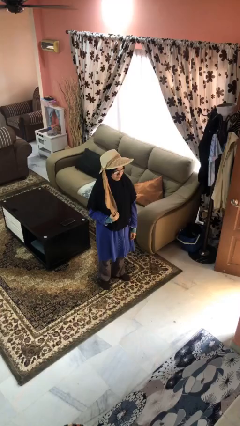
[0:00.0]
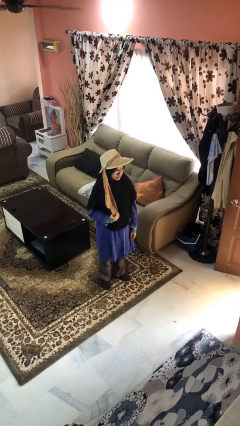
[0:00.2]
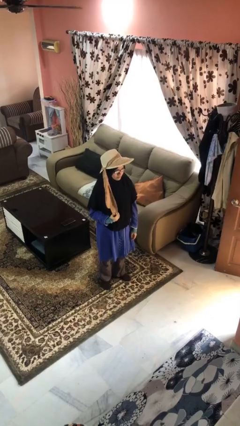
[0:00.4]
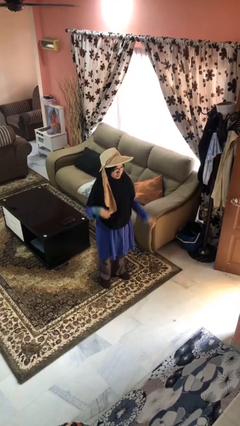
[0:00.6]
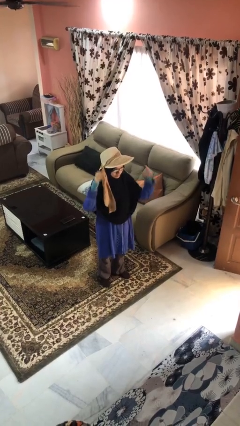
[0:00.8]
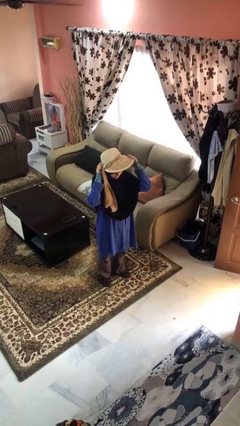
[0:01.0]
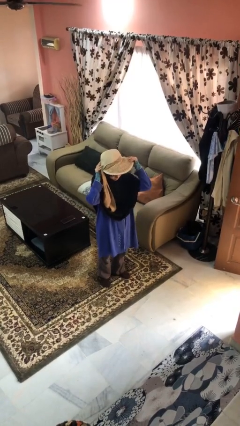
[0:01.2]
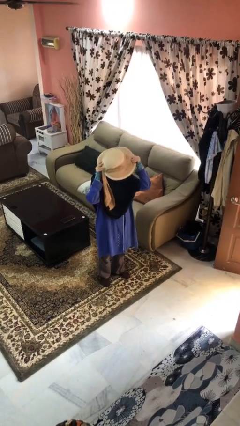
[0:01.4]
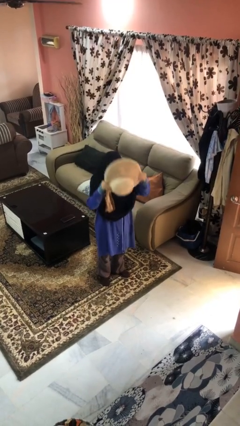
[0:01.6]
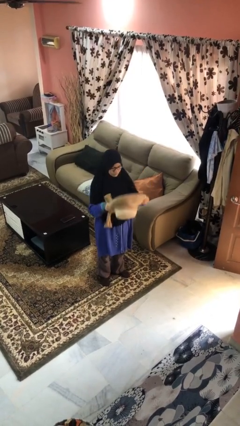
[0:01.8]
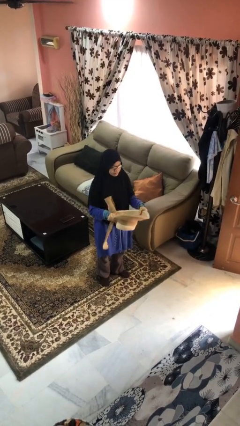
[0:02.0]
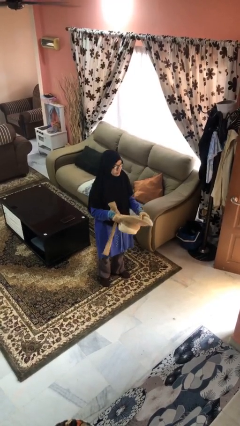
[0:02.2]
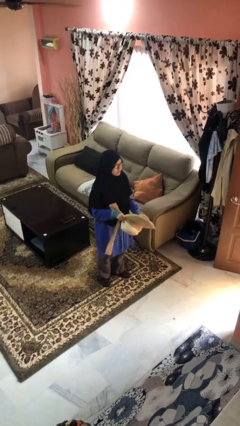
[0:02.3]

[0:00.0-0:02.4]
person takes off hat

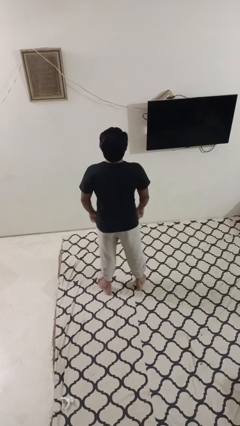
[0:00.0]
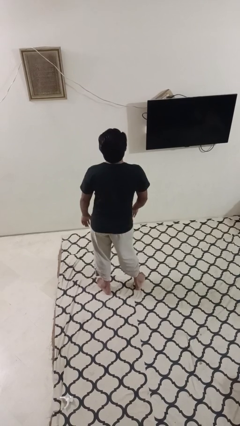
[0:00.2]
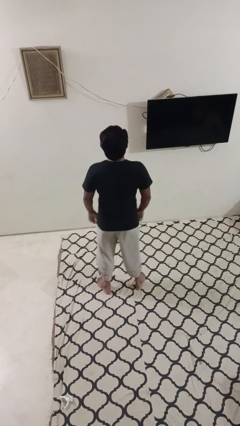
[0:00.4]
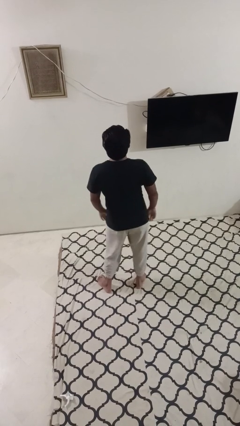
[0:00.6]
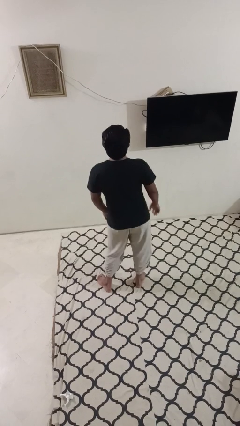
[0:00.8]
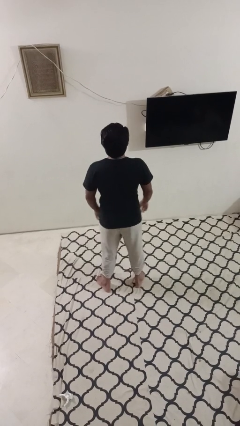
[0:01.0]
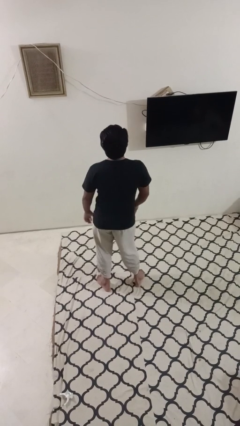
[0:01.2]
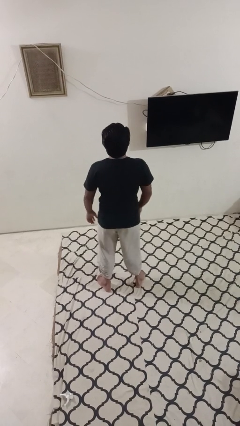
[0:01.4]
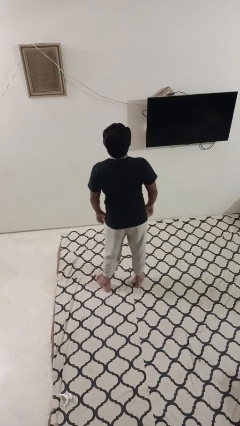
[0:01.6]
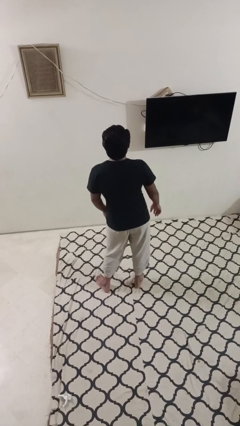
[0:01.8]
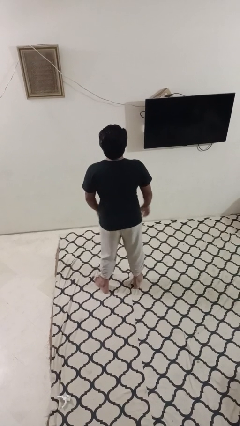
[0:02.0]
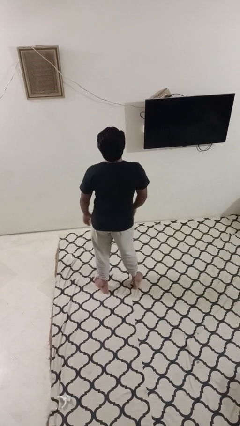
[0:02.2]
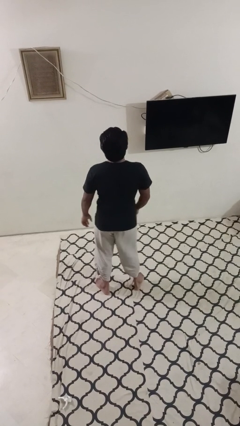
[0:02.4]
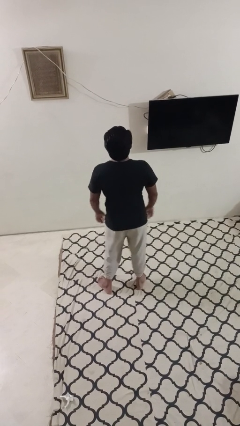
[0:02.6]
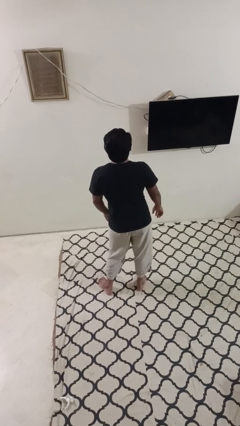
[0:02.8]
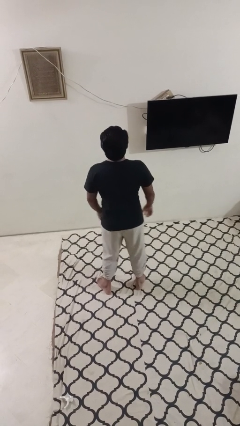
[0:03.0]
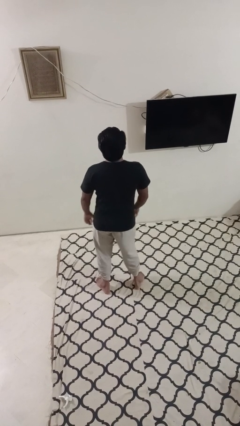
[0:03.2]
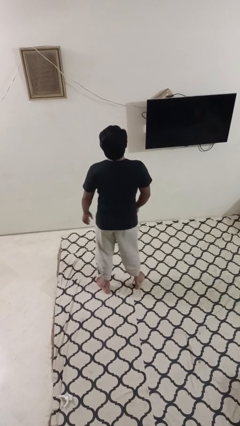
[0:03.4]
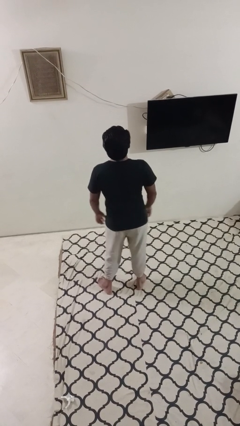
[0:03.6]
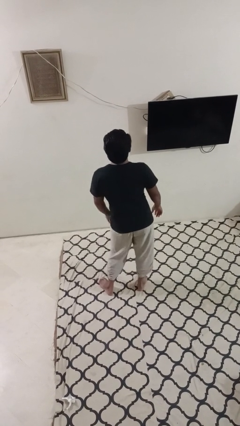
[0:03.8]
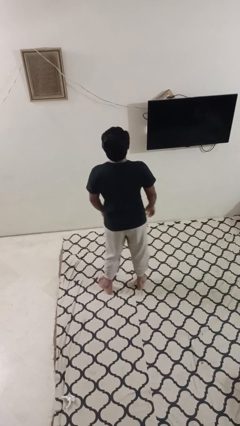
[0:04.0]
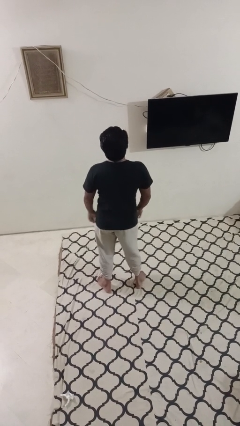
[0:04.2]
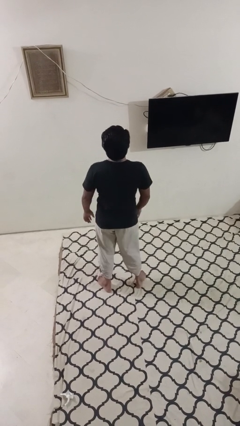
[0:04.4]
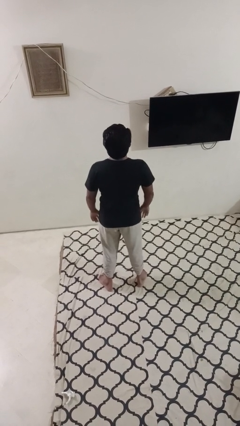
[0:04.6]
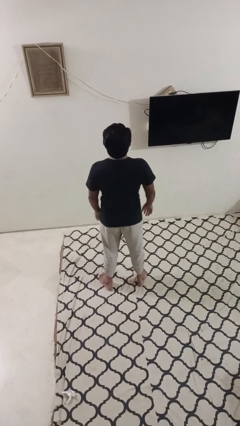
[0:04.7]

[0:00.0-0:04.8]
person wiggles hips

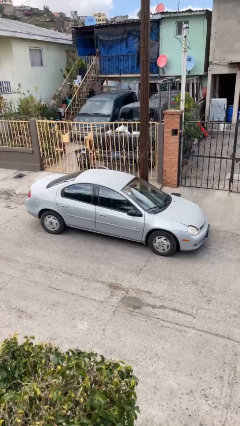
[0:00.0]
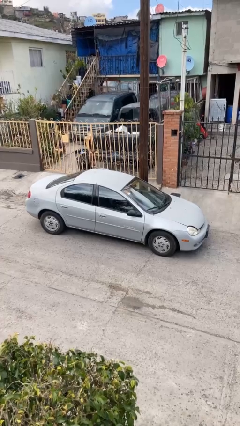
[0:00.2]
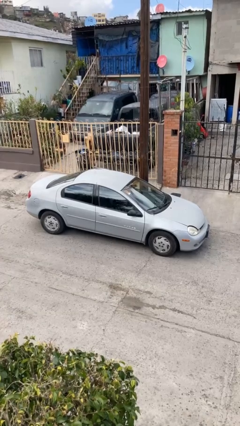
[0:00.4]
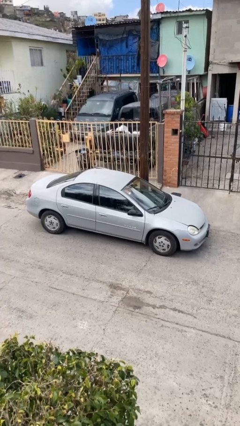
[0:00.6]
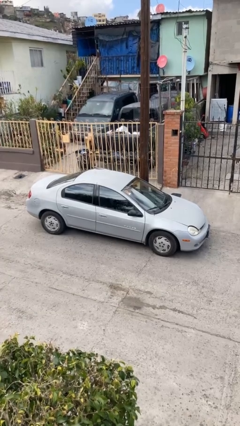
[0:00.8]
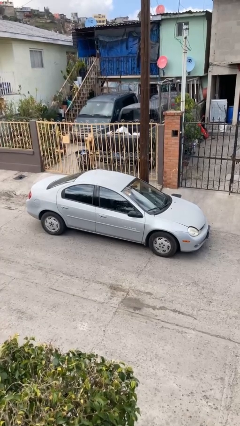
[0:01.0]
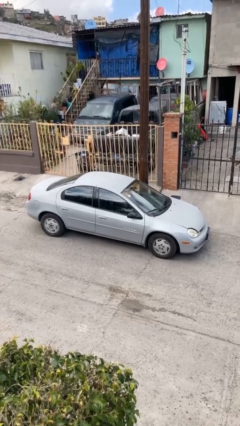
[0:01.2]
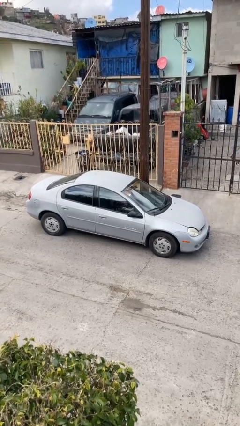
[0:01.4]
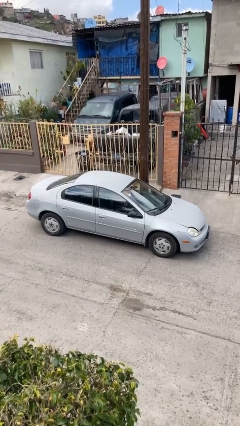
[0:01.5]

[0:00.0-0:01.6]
car picks up person

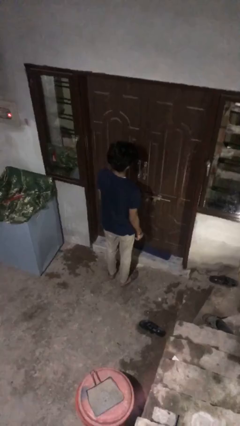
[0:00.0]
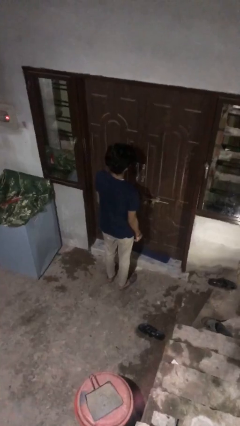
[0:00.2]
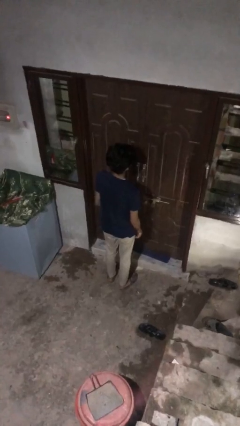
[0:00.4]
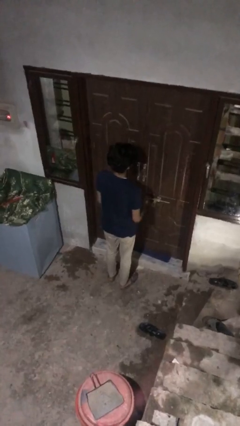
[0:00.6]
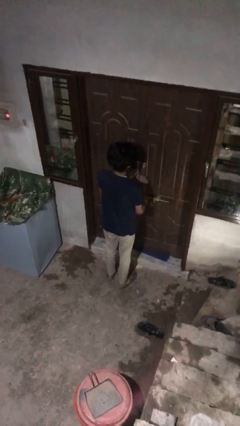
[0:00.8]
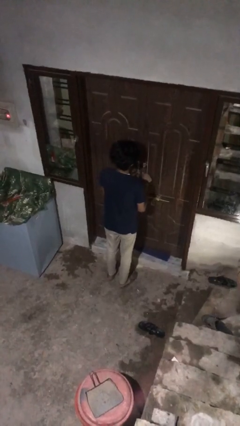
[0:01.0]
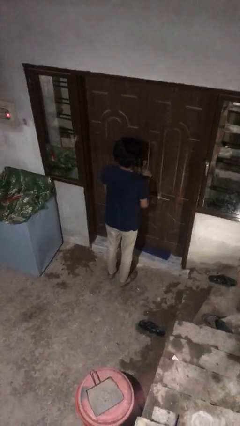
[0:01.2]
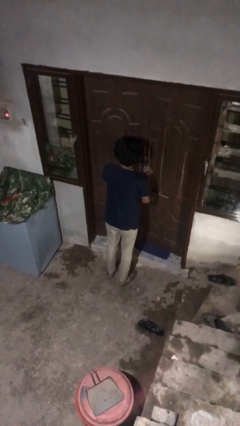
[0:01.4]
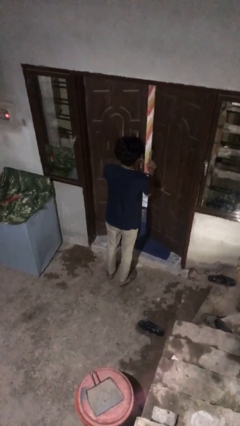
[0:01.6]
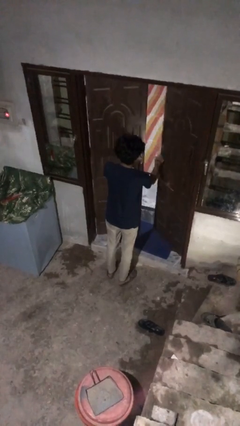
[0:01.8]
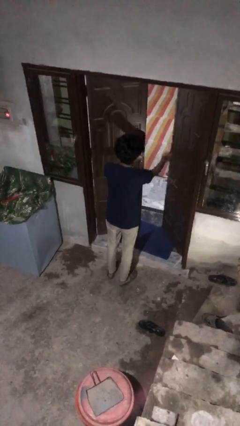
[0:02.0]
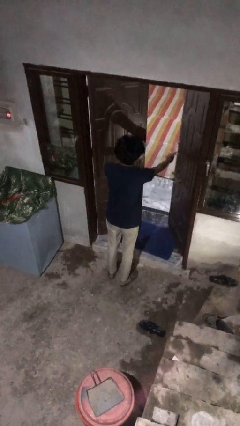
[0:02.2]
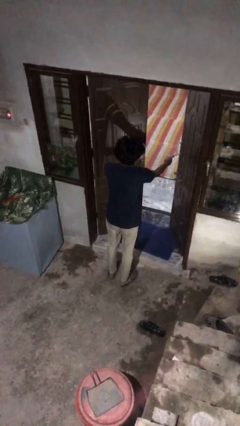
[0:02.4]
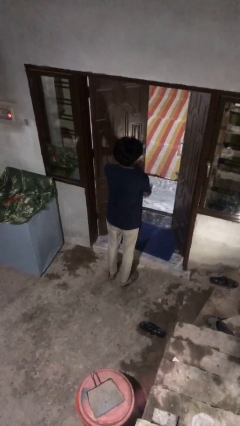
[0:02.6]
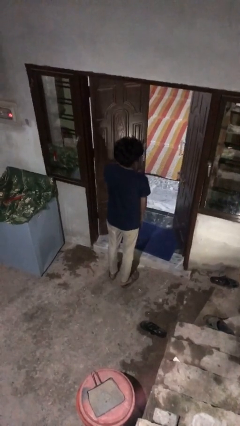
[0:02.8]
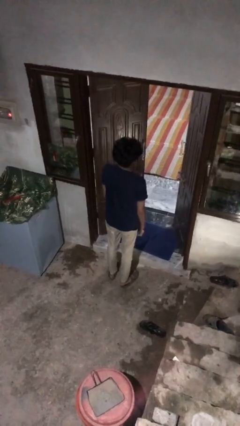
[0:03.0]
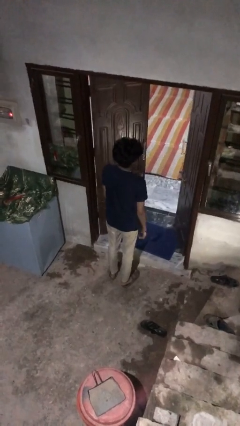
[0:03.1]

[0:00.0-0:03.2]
person opens facility door

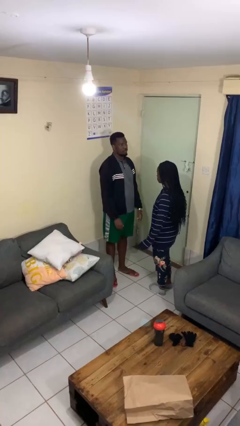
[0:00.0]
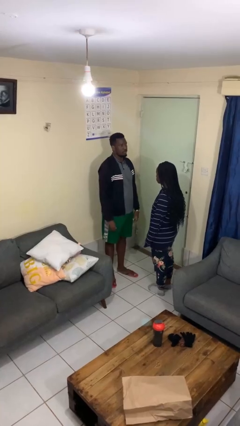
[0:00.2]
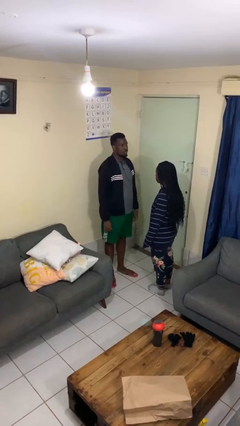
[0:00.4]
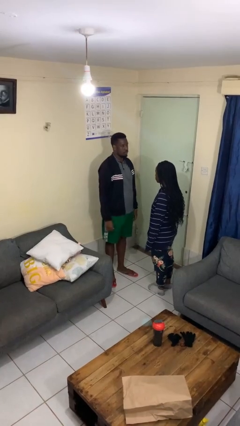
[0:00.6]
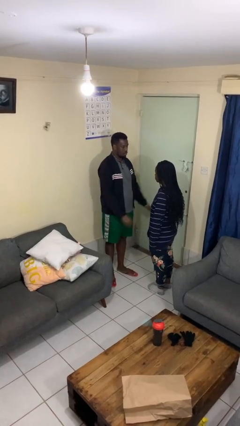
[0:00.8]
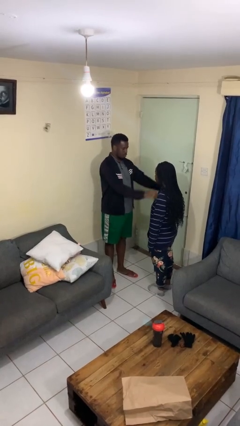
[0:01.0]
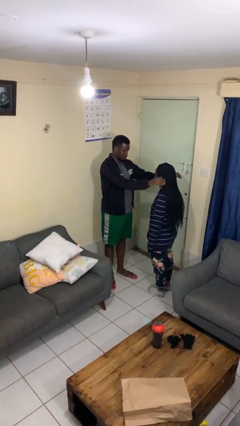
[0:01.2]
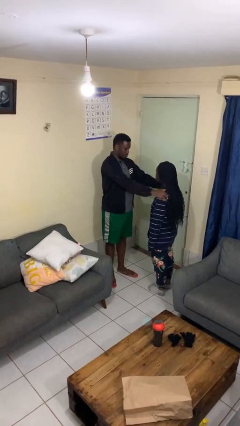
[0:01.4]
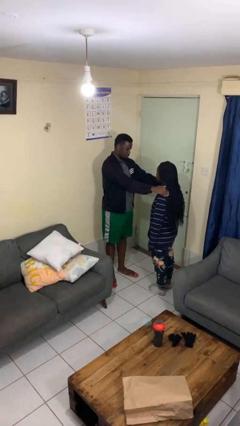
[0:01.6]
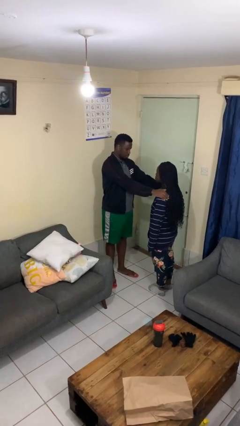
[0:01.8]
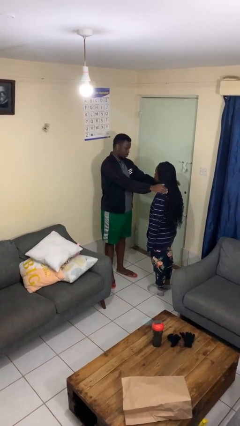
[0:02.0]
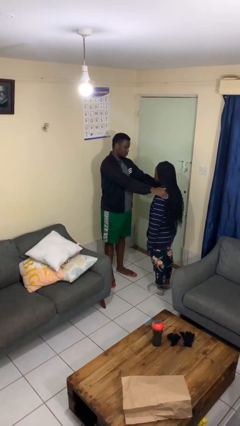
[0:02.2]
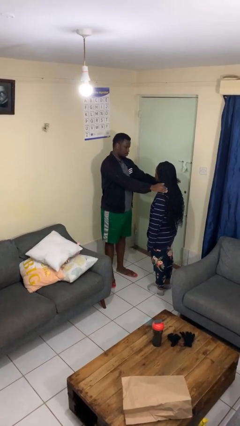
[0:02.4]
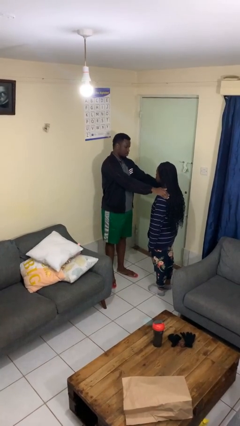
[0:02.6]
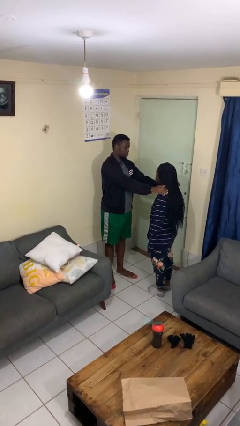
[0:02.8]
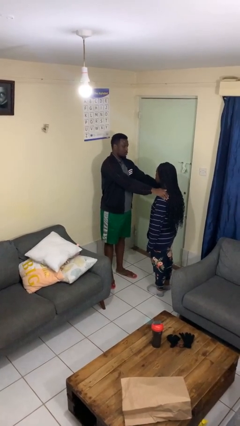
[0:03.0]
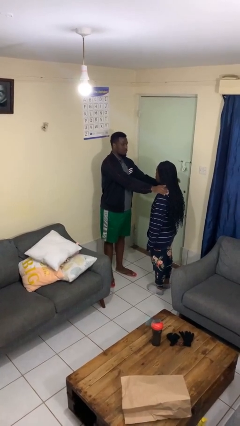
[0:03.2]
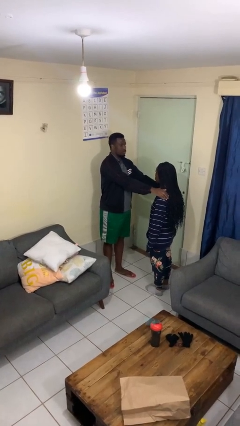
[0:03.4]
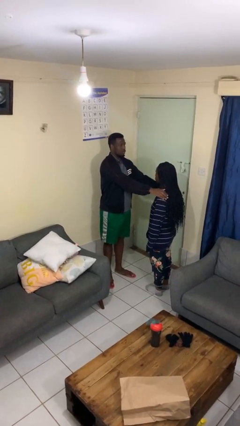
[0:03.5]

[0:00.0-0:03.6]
person pounds shoulders of person

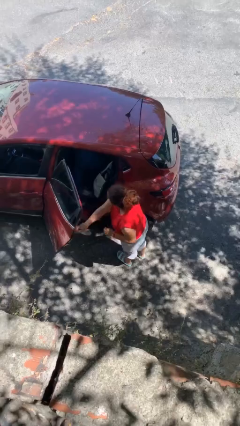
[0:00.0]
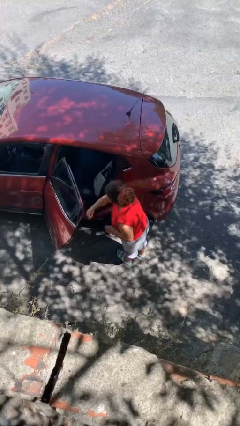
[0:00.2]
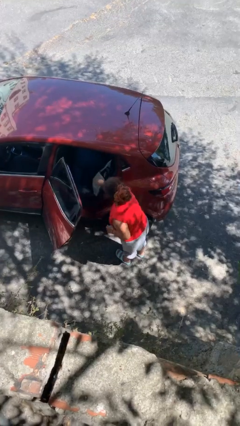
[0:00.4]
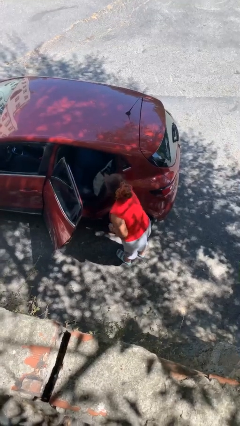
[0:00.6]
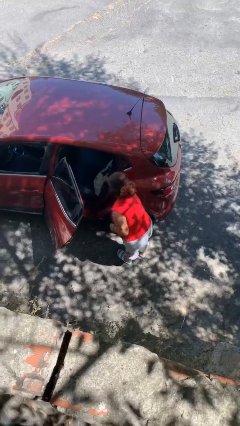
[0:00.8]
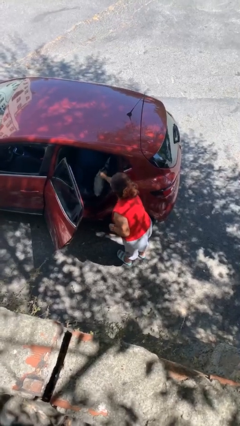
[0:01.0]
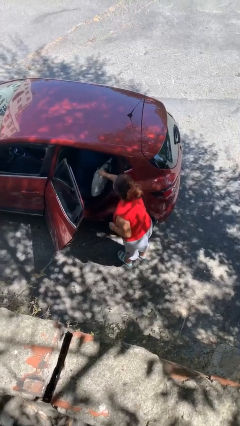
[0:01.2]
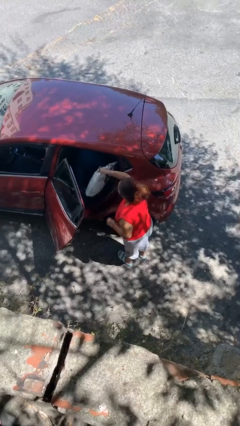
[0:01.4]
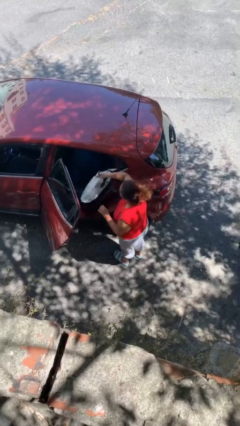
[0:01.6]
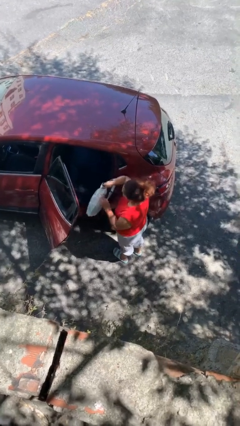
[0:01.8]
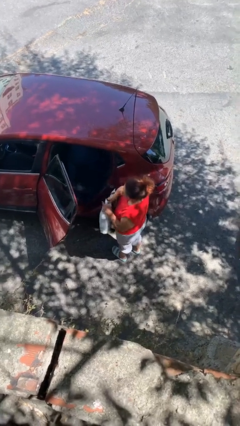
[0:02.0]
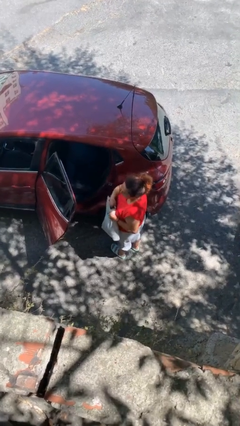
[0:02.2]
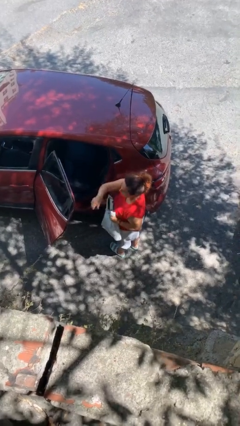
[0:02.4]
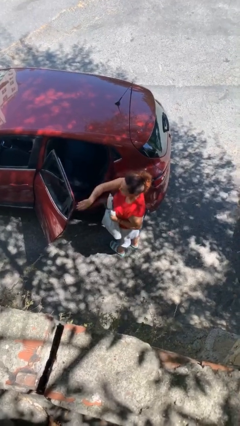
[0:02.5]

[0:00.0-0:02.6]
person unloads car
